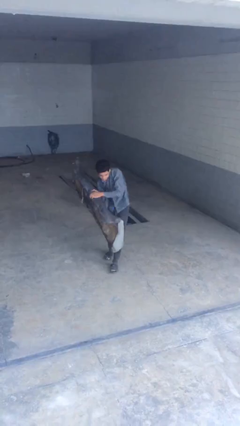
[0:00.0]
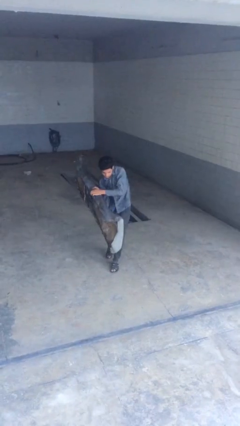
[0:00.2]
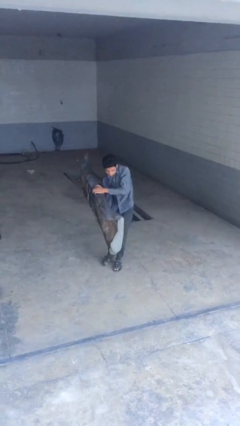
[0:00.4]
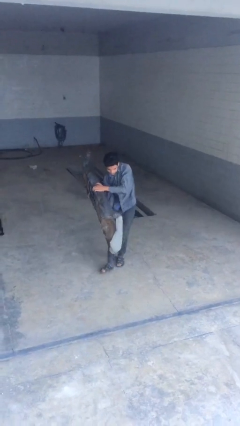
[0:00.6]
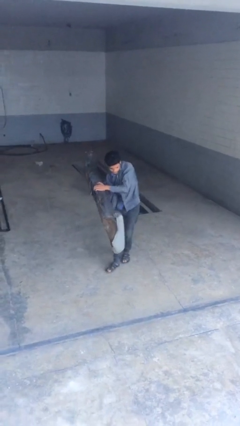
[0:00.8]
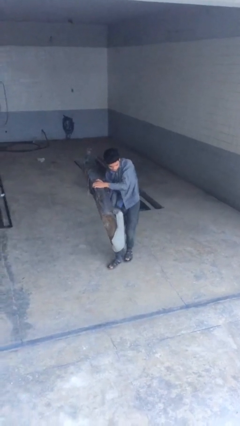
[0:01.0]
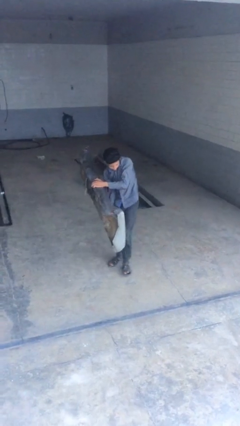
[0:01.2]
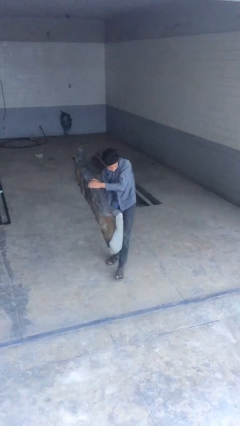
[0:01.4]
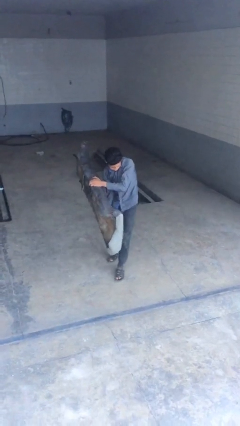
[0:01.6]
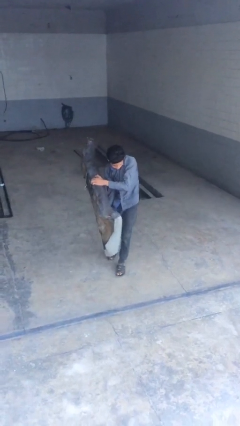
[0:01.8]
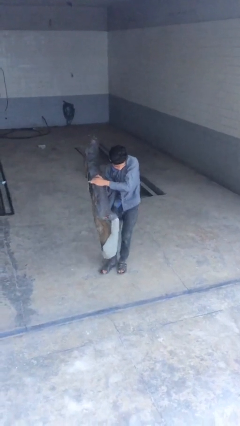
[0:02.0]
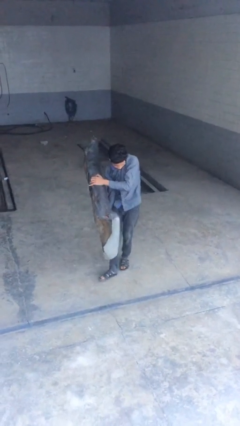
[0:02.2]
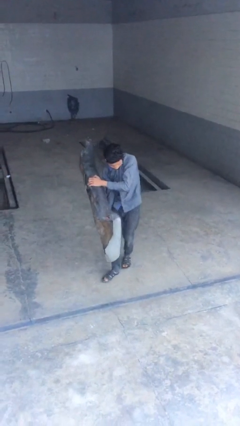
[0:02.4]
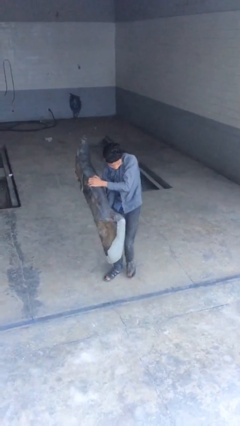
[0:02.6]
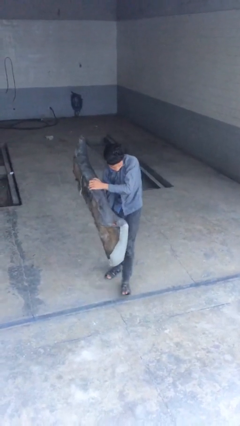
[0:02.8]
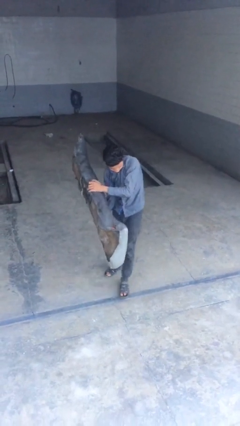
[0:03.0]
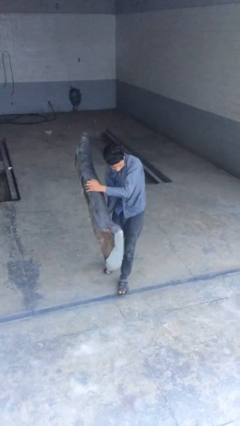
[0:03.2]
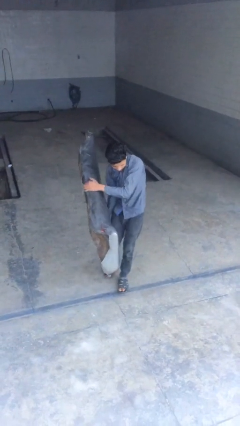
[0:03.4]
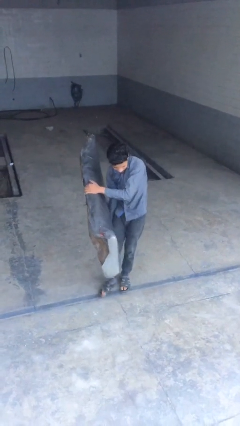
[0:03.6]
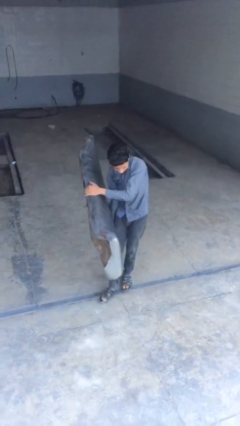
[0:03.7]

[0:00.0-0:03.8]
person carries heavy object

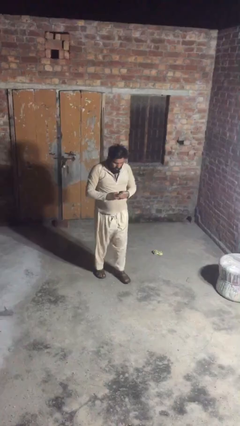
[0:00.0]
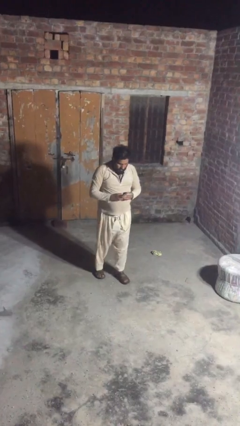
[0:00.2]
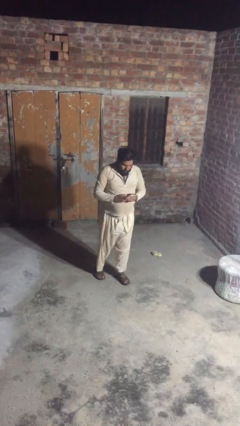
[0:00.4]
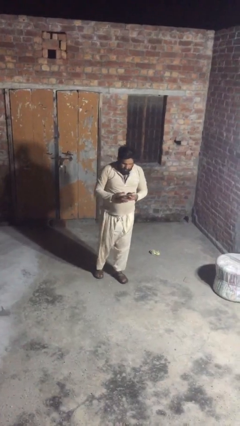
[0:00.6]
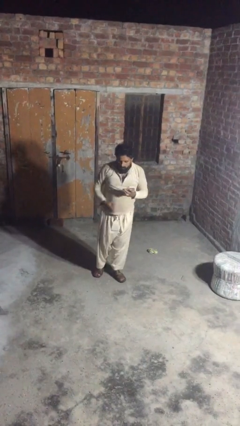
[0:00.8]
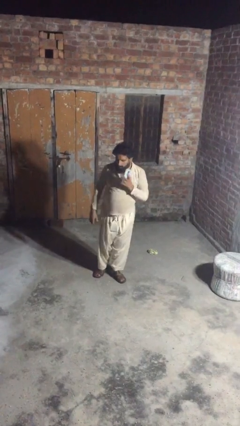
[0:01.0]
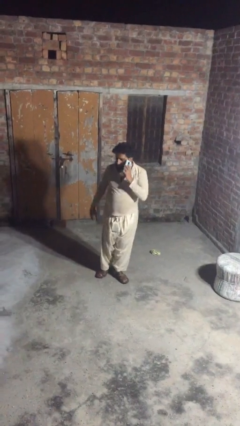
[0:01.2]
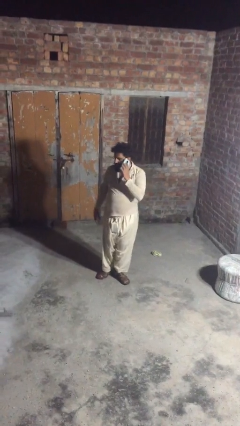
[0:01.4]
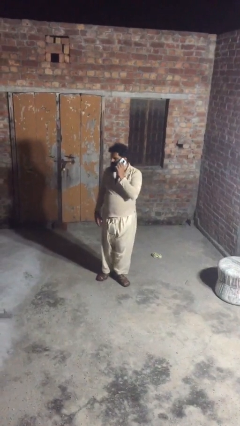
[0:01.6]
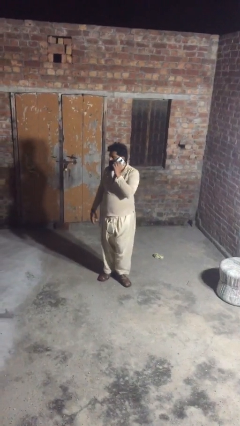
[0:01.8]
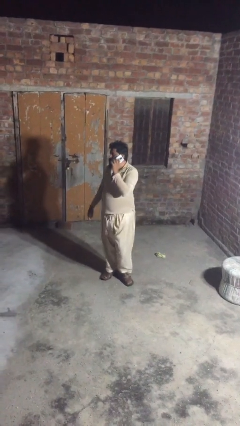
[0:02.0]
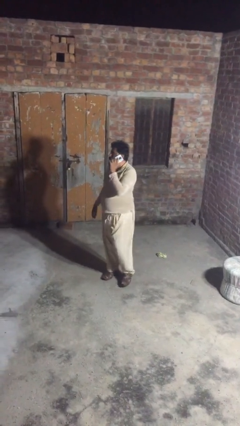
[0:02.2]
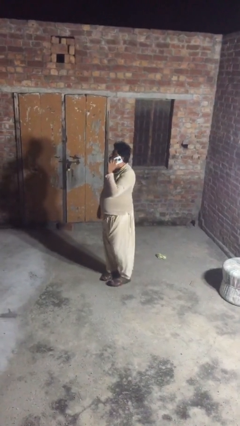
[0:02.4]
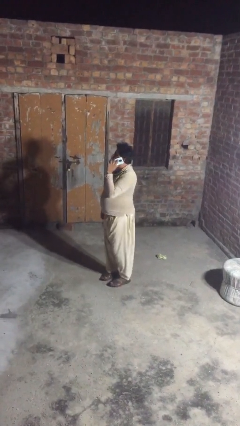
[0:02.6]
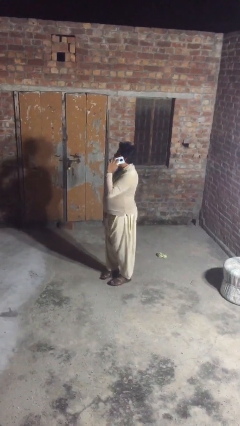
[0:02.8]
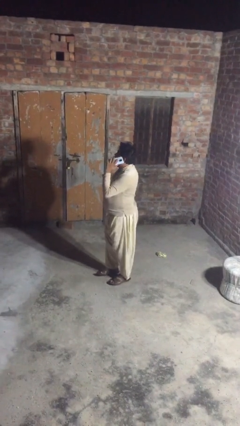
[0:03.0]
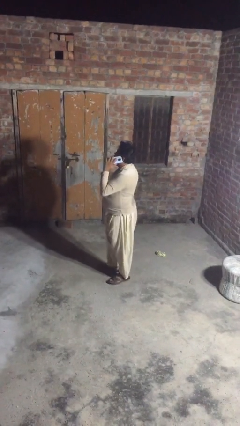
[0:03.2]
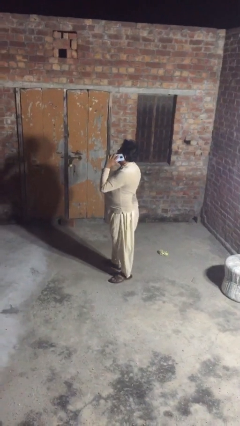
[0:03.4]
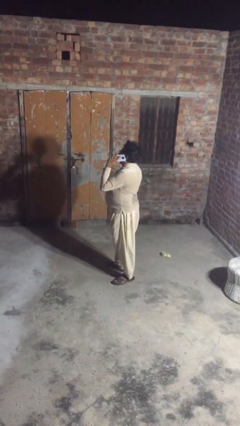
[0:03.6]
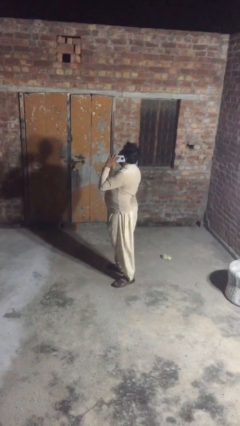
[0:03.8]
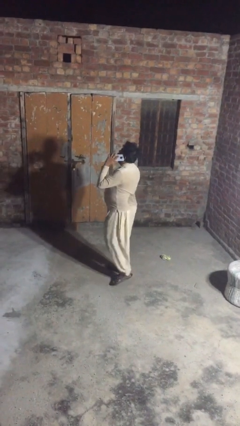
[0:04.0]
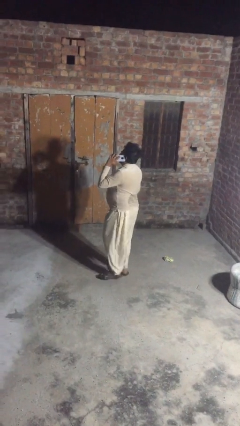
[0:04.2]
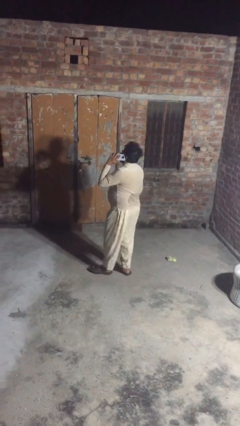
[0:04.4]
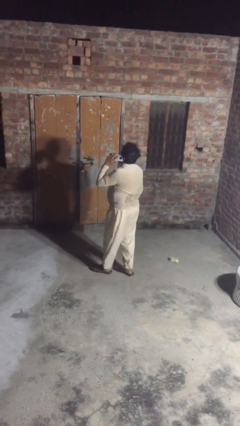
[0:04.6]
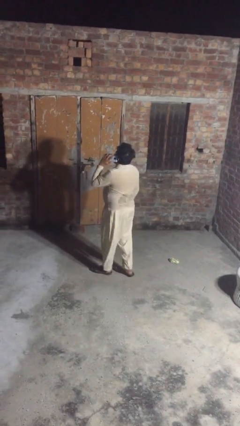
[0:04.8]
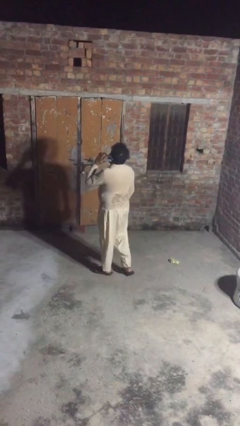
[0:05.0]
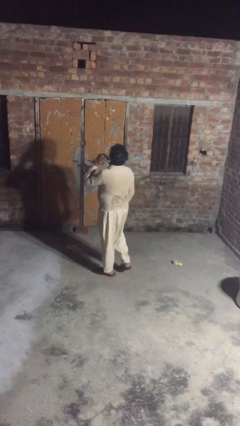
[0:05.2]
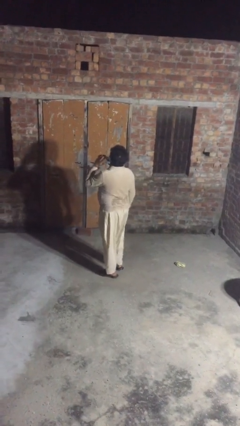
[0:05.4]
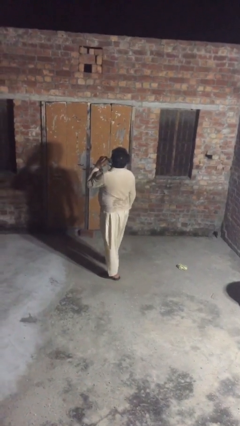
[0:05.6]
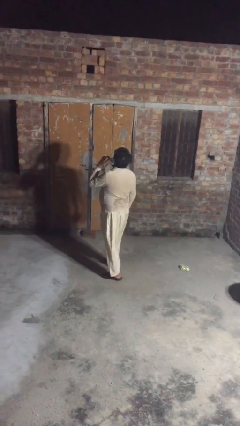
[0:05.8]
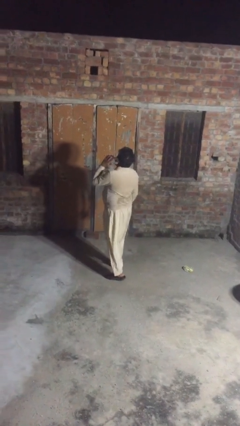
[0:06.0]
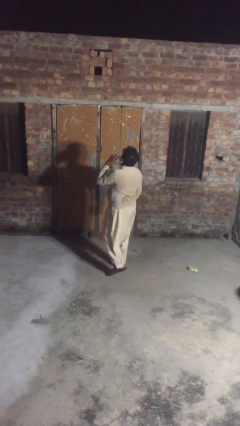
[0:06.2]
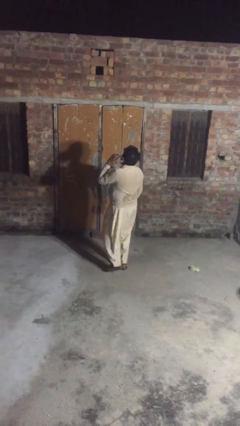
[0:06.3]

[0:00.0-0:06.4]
person talks on phone

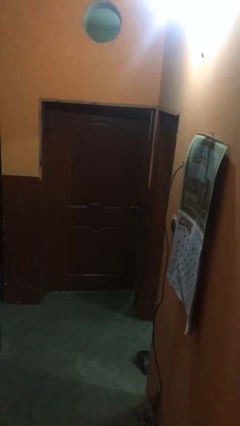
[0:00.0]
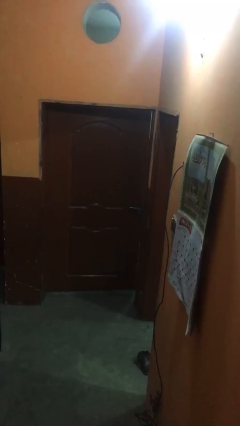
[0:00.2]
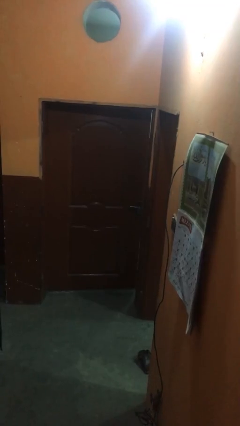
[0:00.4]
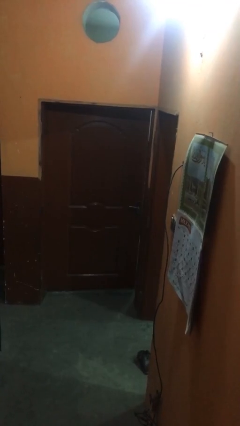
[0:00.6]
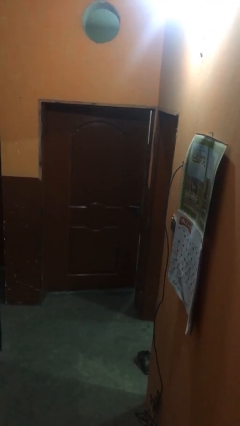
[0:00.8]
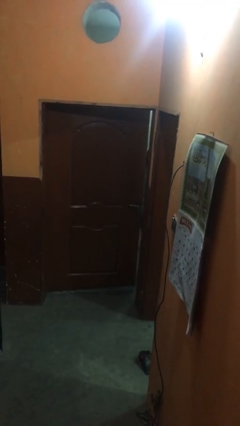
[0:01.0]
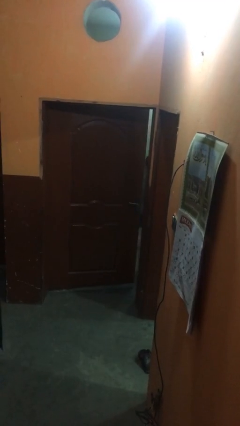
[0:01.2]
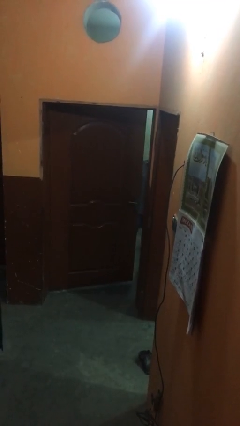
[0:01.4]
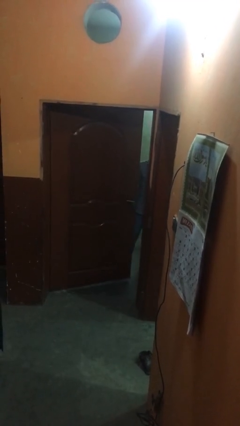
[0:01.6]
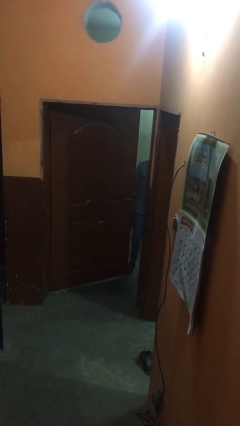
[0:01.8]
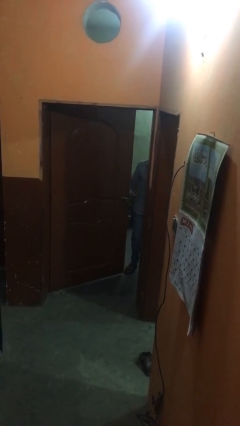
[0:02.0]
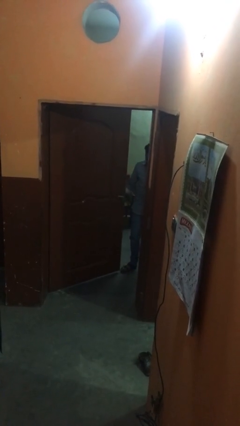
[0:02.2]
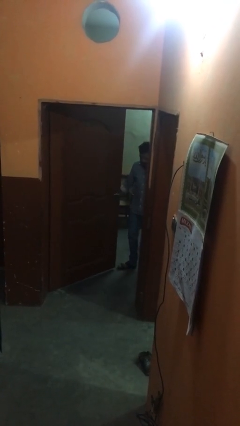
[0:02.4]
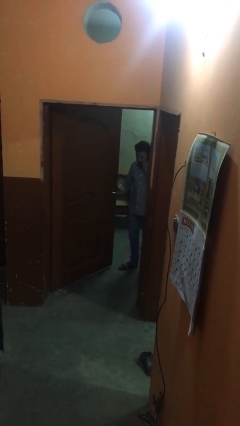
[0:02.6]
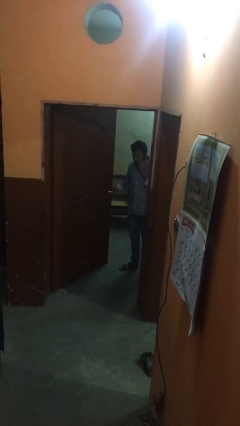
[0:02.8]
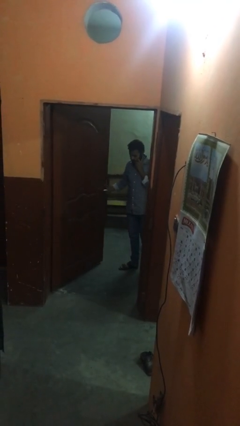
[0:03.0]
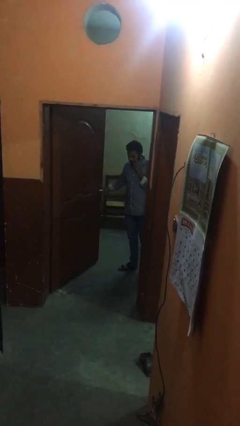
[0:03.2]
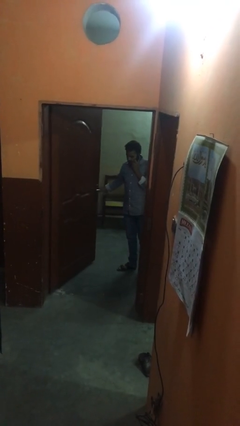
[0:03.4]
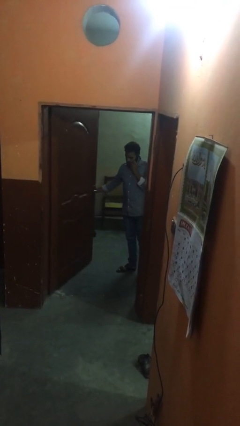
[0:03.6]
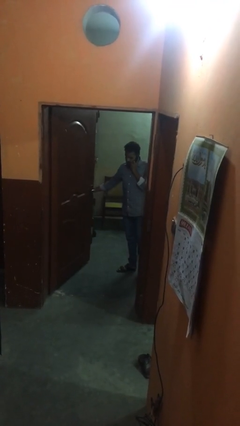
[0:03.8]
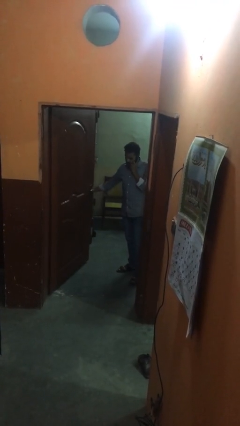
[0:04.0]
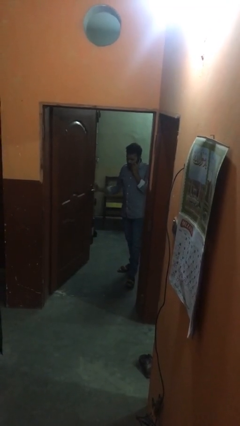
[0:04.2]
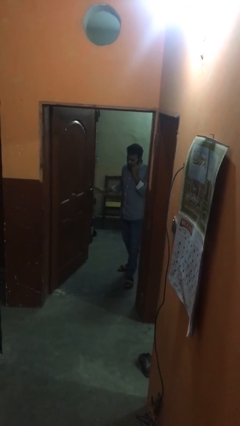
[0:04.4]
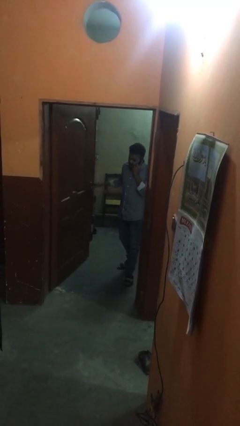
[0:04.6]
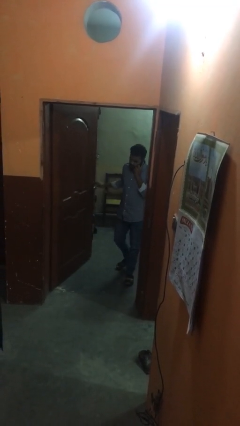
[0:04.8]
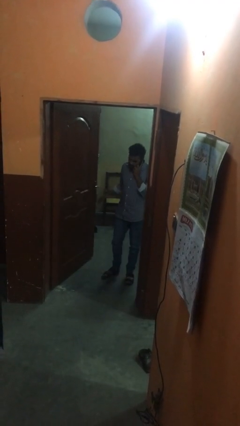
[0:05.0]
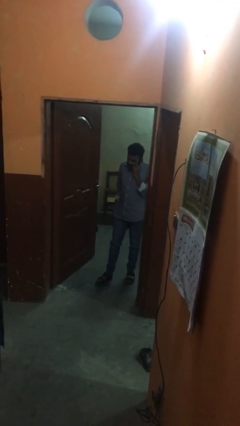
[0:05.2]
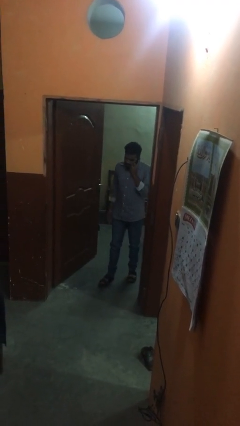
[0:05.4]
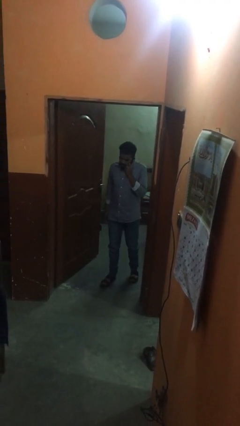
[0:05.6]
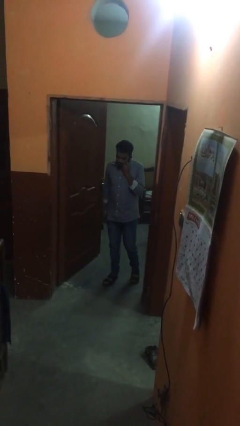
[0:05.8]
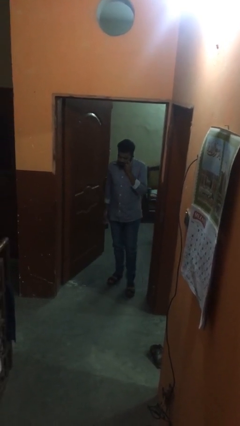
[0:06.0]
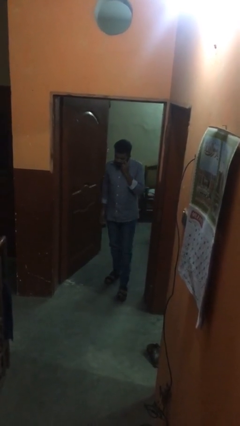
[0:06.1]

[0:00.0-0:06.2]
person opens facility door

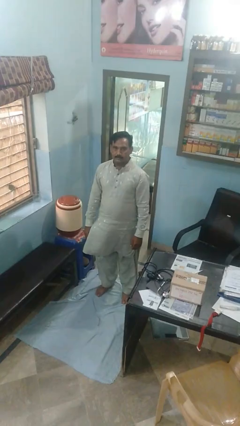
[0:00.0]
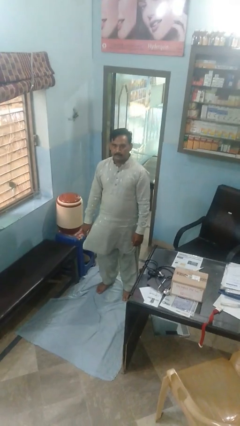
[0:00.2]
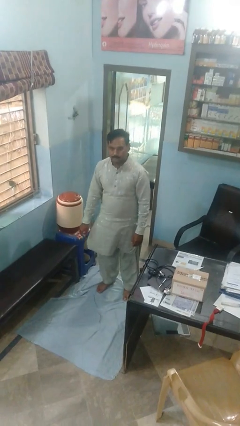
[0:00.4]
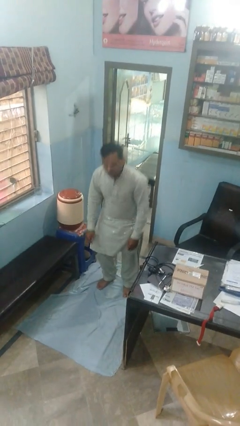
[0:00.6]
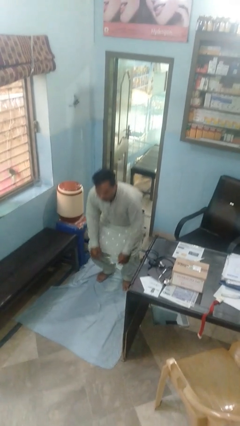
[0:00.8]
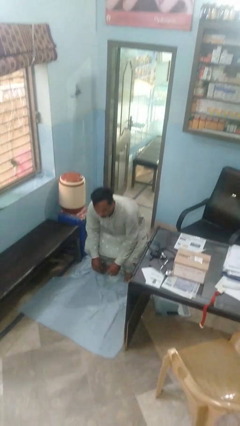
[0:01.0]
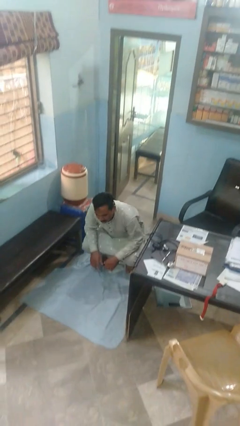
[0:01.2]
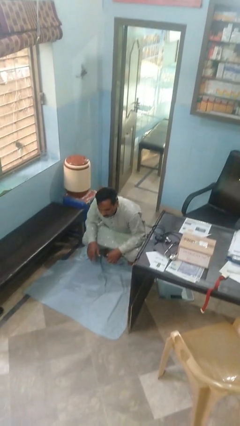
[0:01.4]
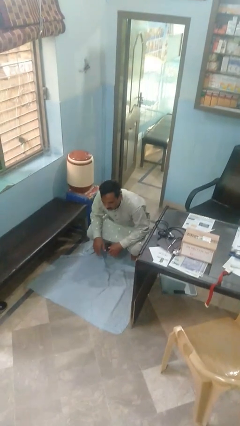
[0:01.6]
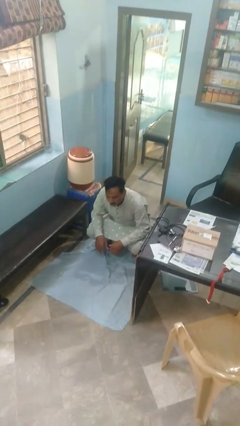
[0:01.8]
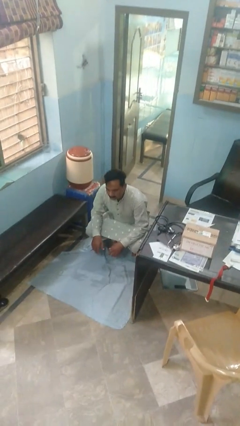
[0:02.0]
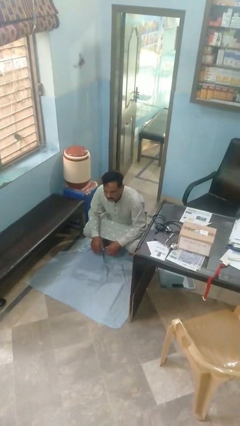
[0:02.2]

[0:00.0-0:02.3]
person squats
